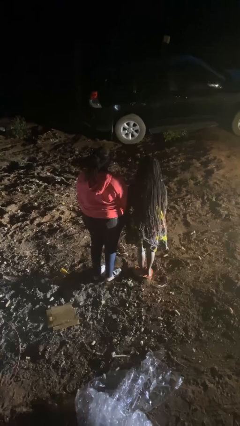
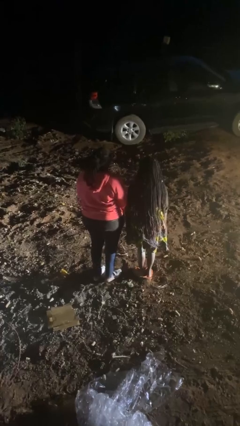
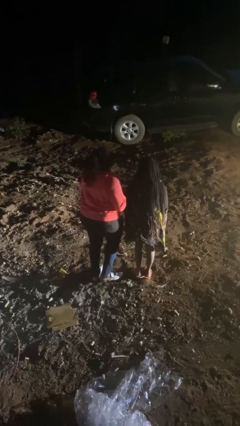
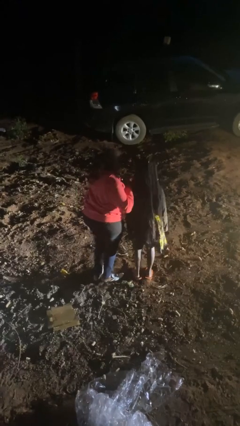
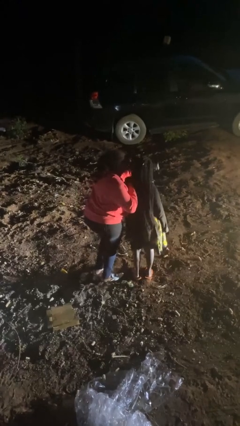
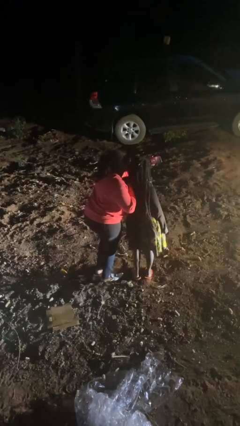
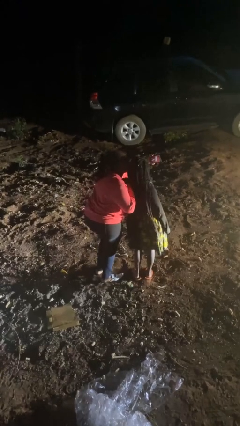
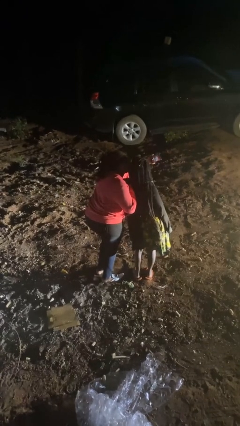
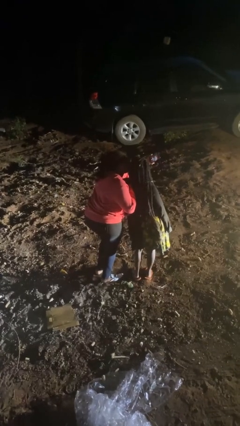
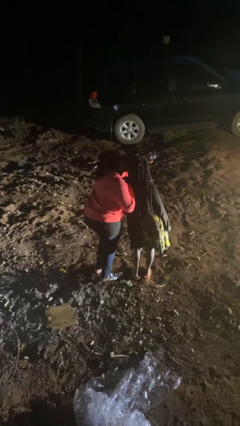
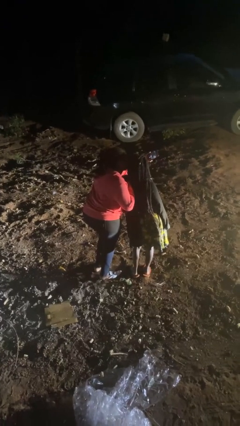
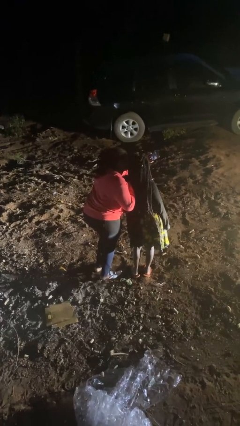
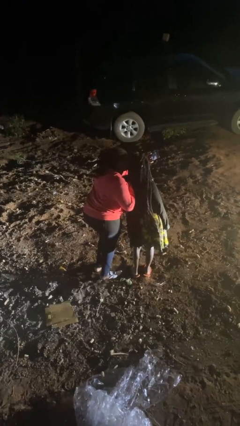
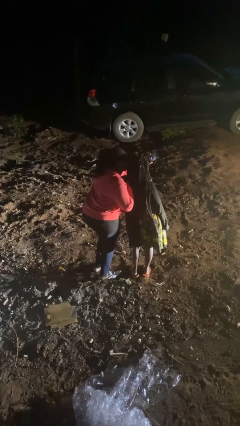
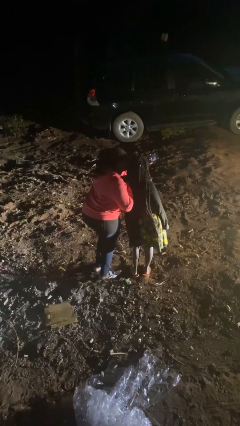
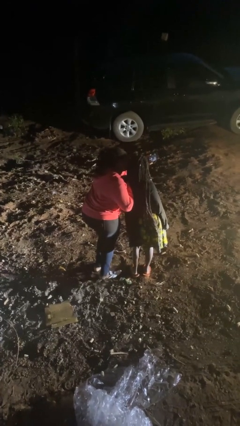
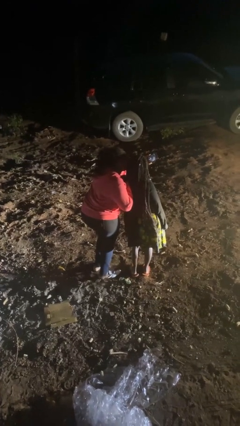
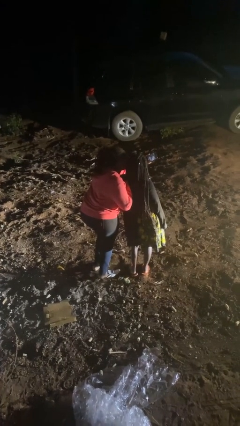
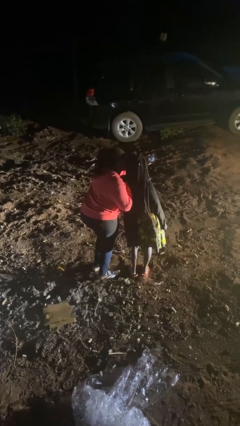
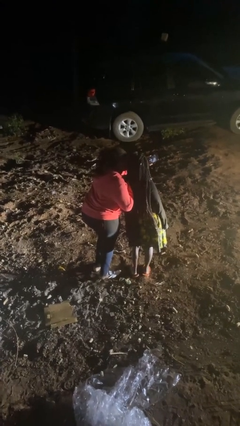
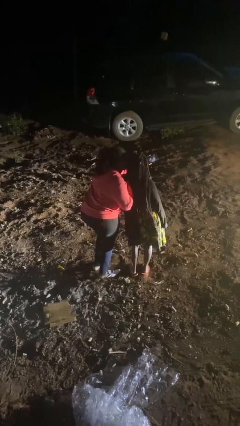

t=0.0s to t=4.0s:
person takes selfie with person

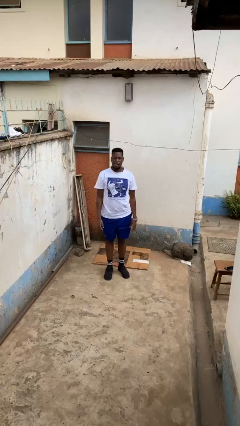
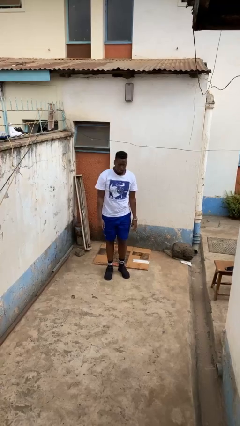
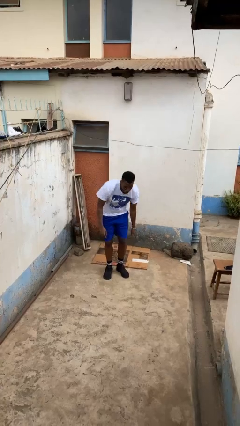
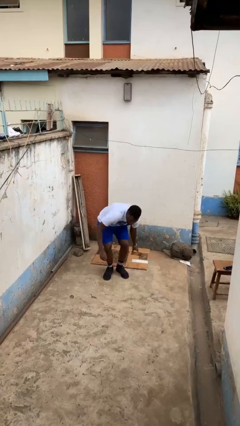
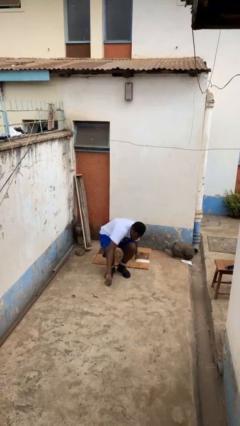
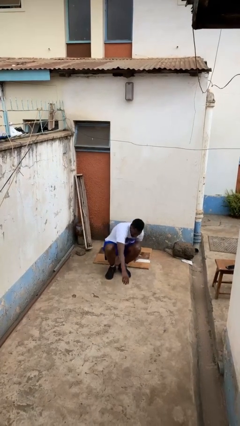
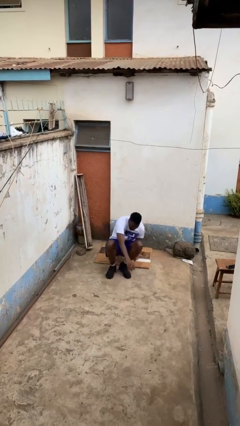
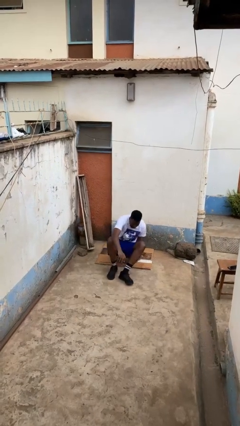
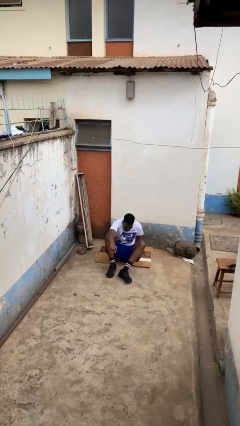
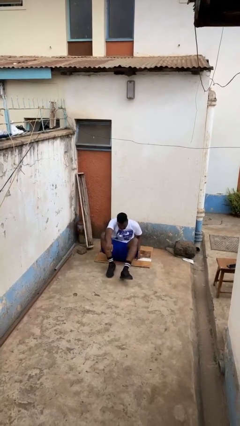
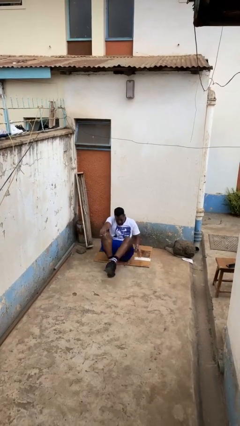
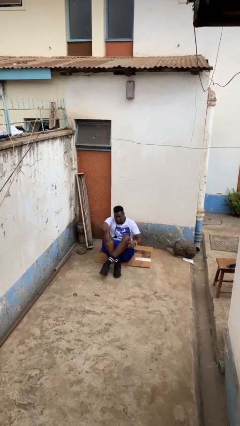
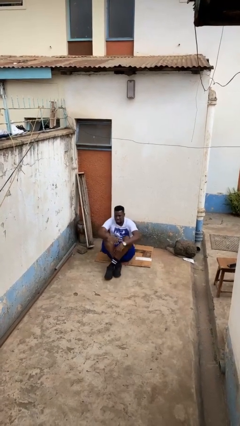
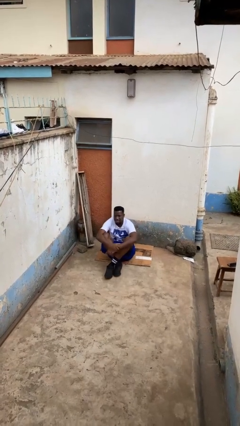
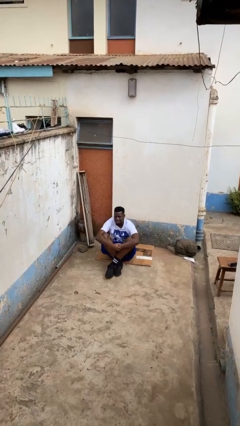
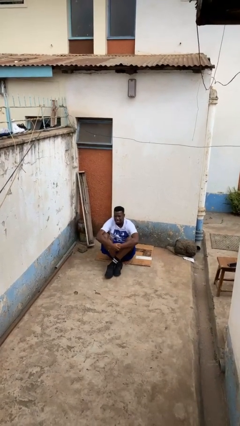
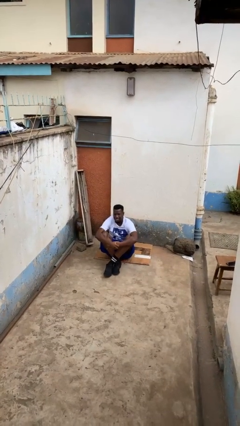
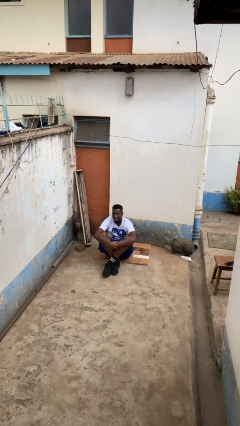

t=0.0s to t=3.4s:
person sits crisscross

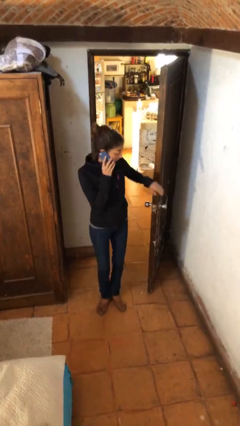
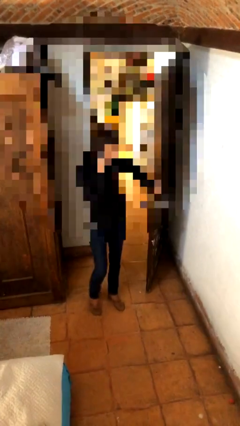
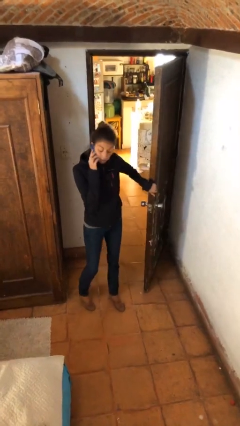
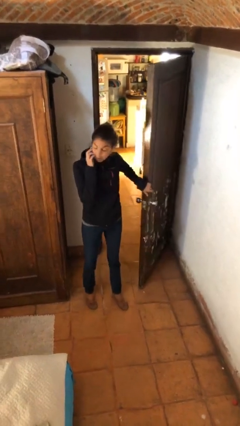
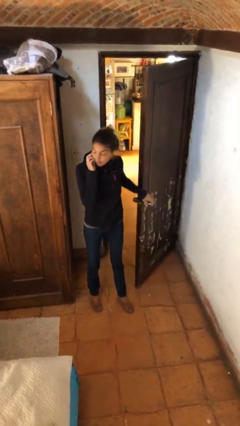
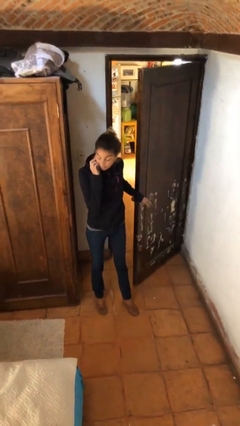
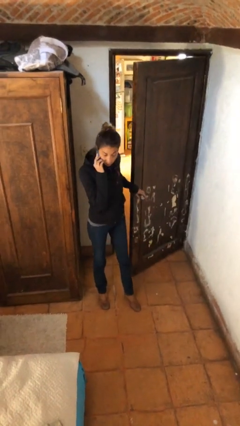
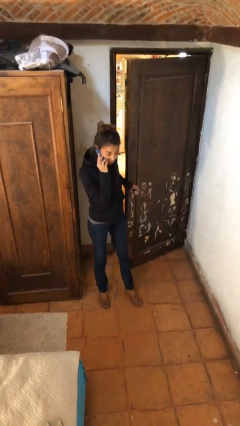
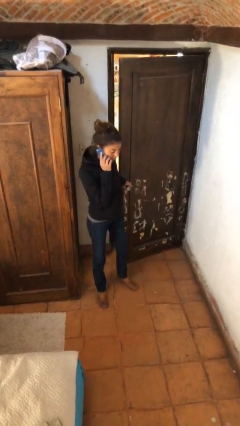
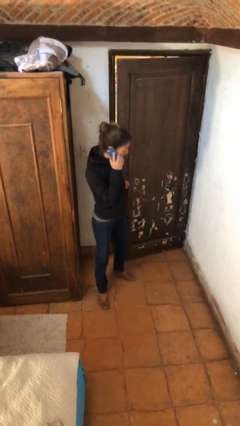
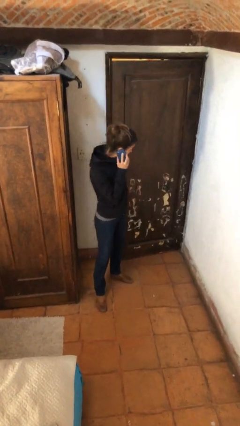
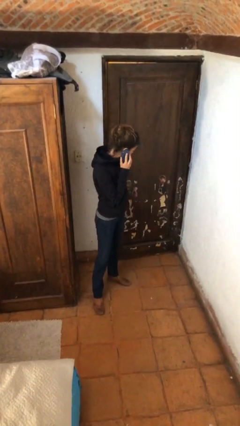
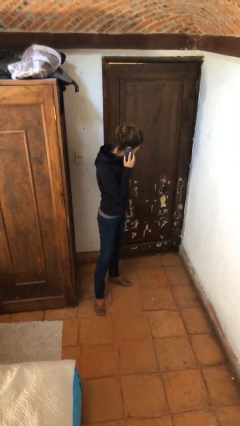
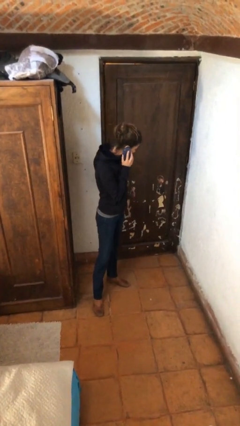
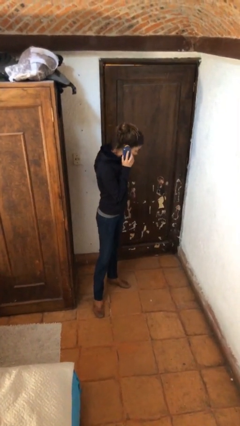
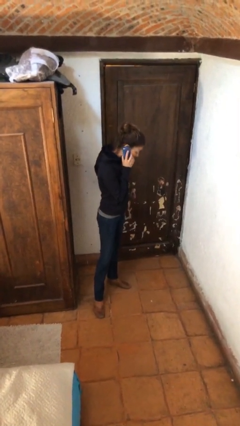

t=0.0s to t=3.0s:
person closes facility door

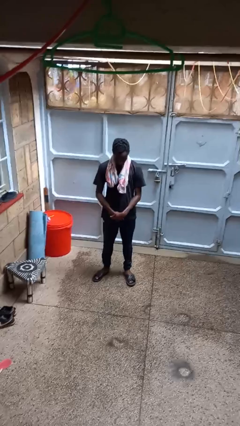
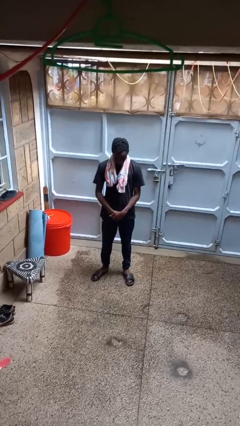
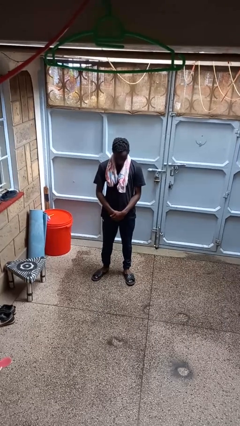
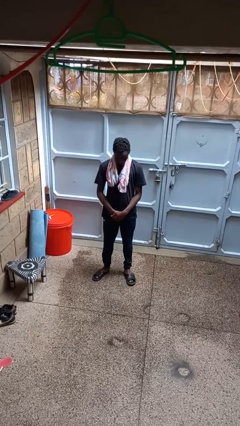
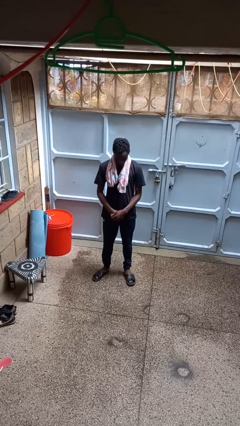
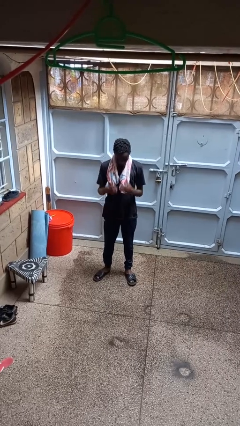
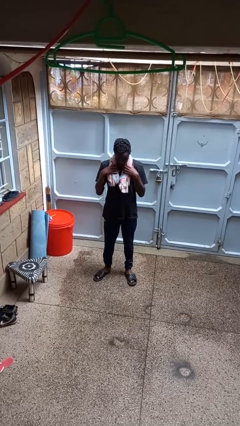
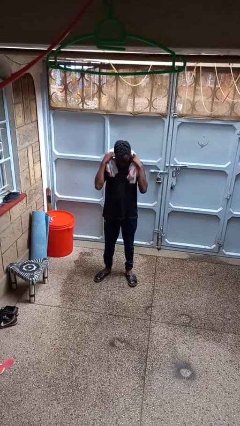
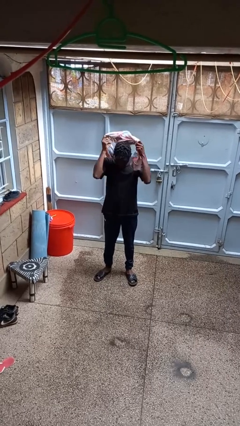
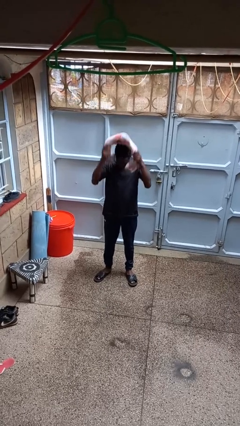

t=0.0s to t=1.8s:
person takes off scarf

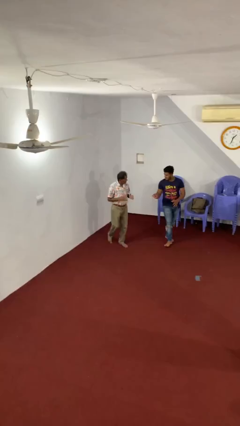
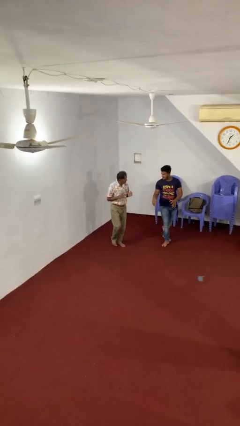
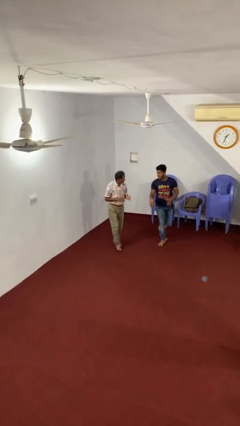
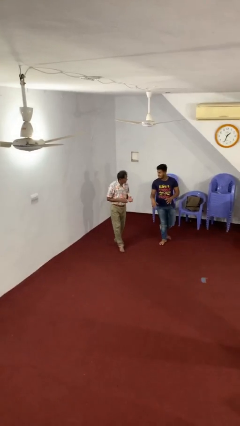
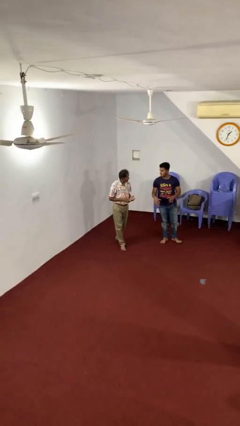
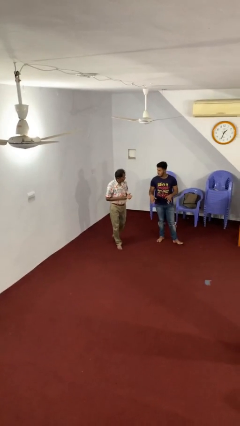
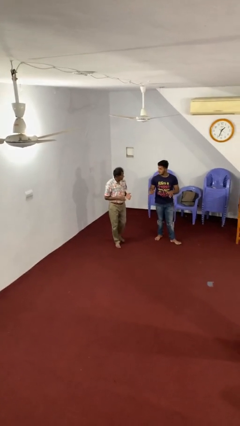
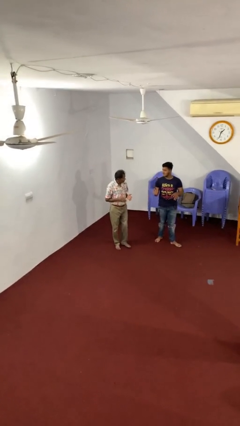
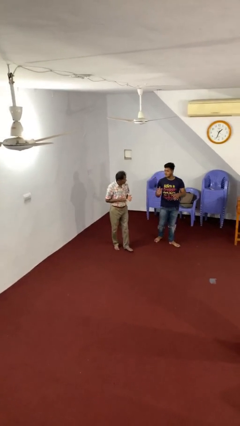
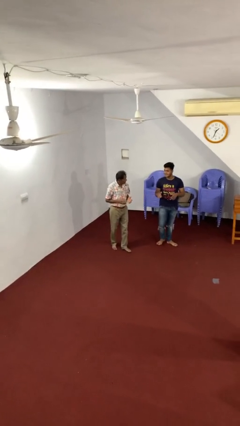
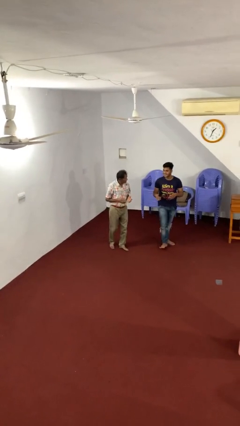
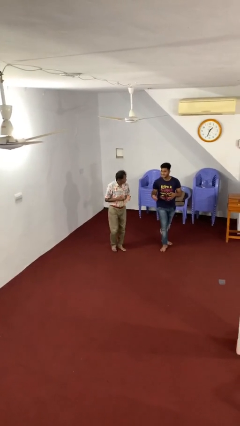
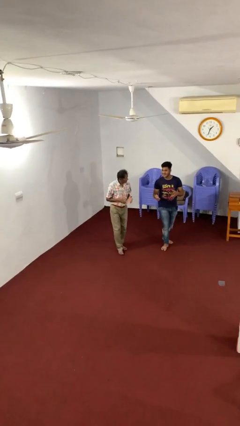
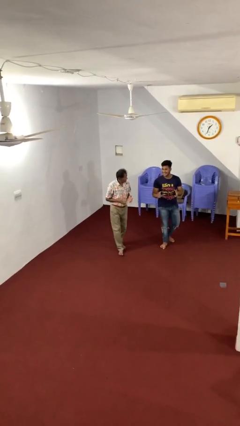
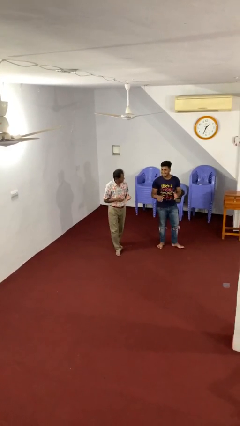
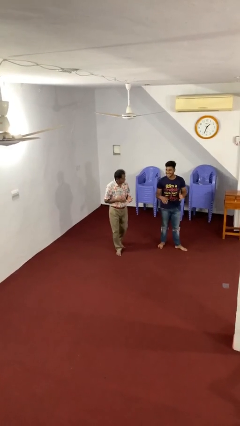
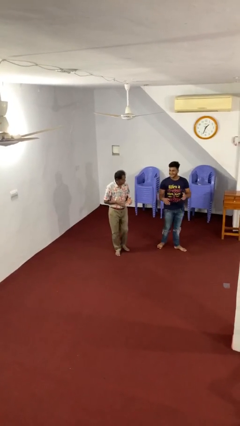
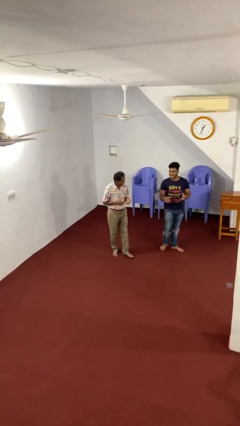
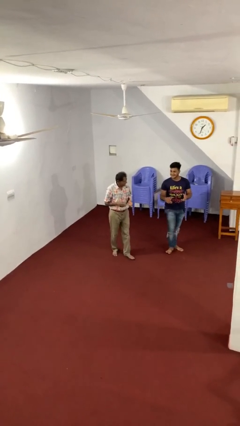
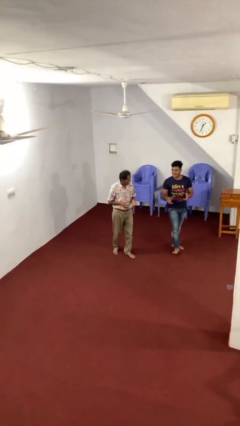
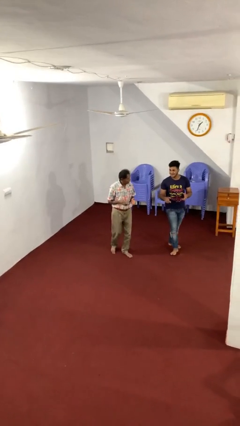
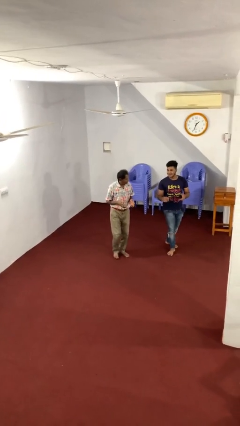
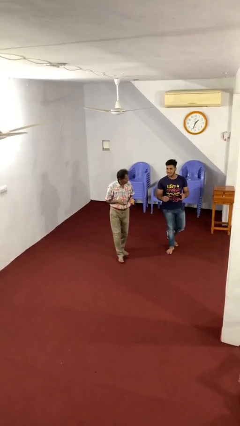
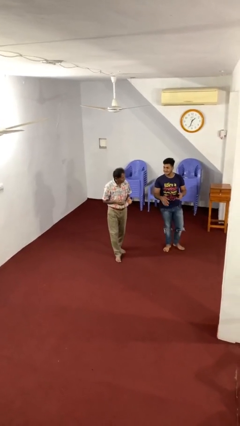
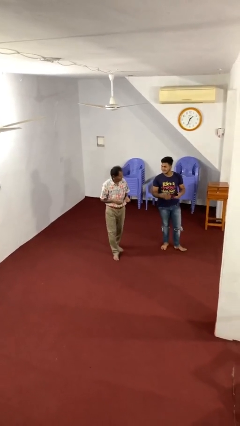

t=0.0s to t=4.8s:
person talks to person

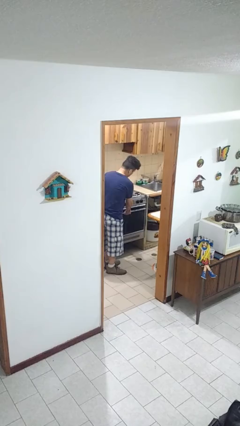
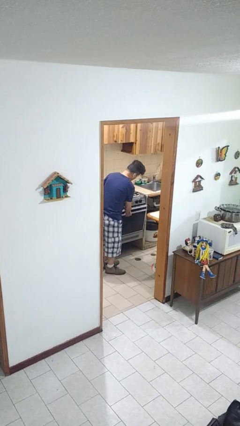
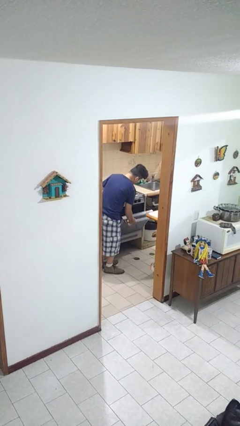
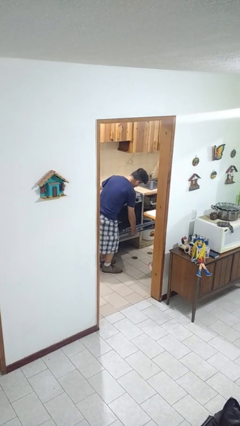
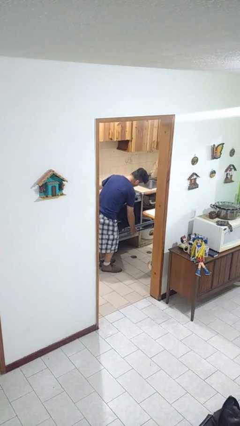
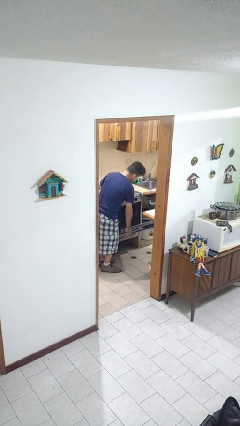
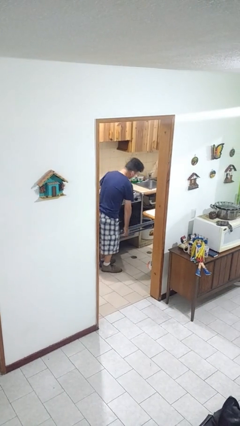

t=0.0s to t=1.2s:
person opens oven door
